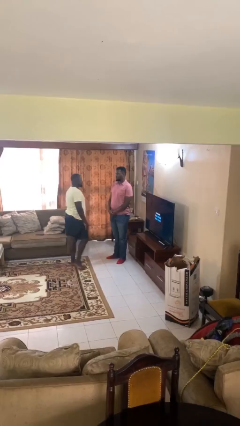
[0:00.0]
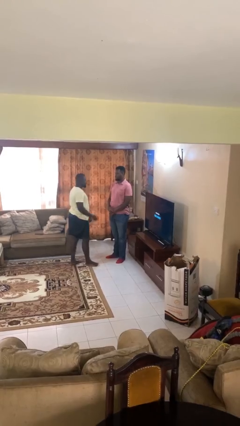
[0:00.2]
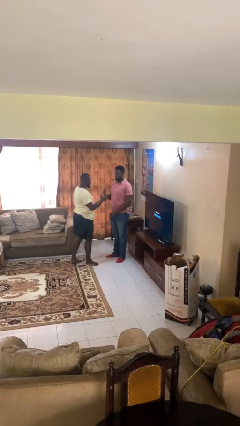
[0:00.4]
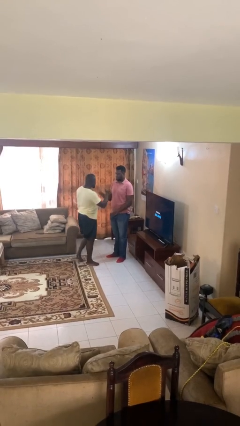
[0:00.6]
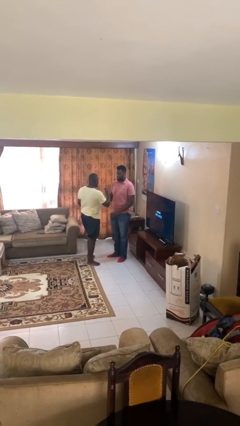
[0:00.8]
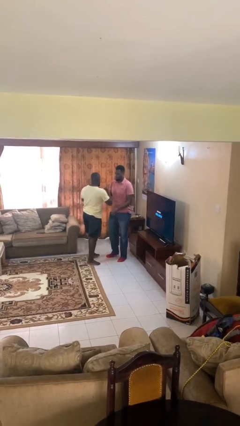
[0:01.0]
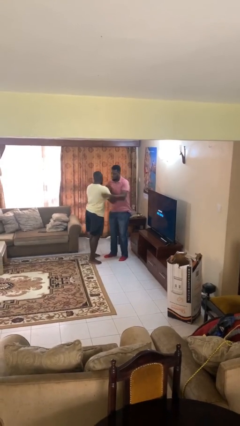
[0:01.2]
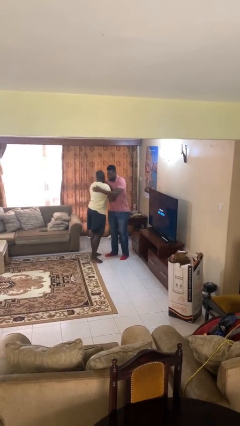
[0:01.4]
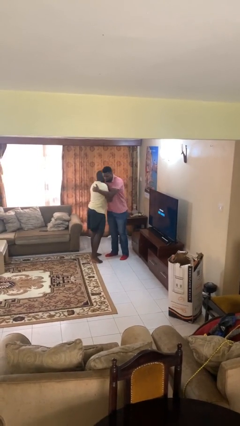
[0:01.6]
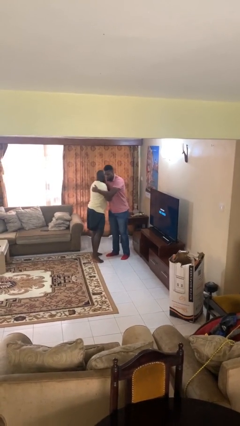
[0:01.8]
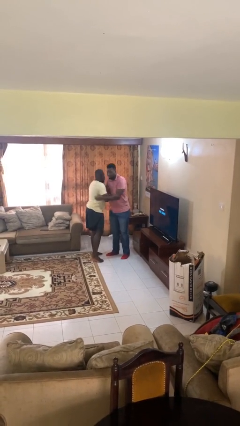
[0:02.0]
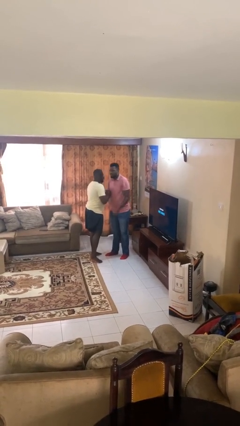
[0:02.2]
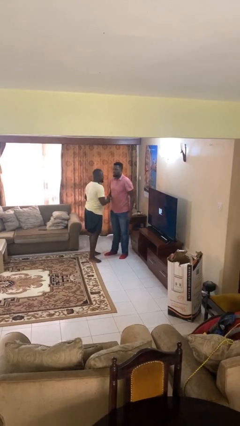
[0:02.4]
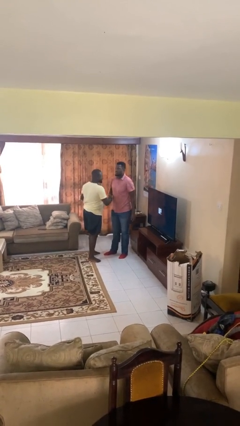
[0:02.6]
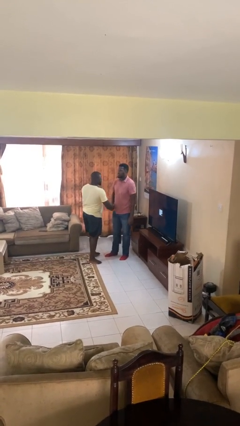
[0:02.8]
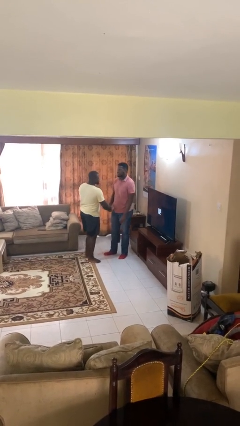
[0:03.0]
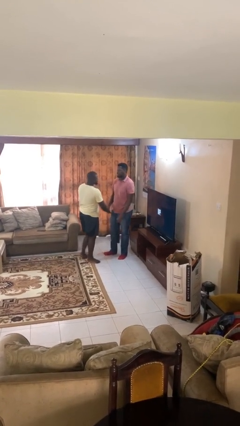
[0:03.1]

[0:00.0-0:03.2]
person embraces person

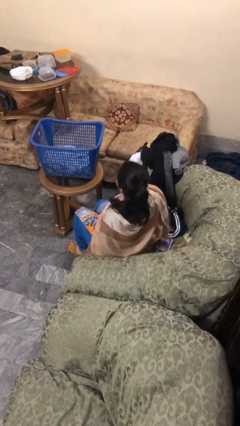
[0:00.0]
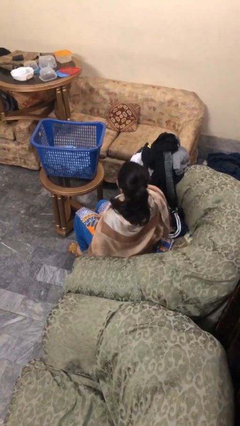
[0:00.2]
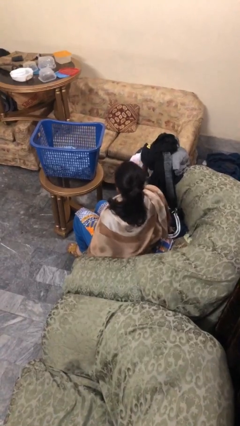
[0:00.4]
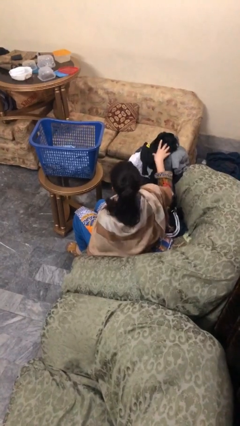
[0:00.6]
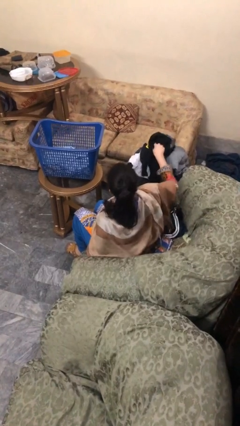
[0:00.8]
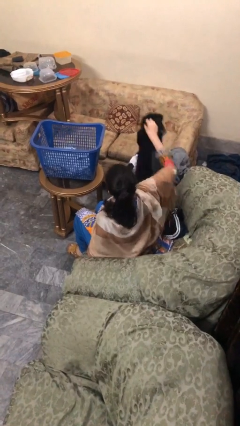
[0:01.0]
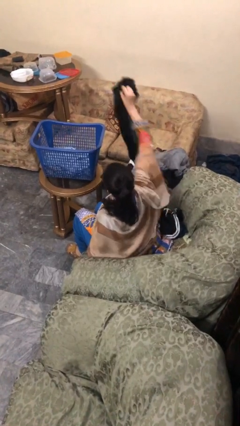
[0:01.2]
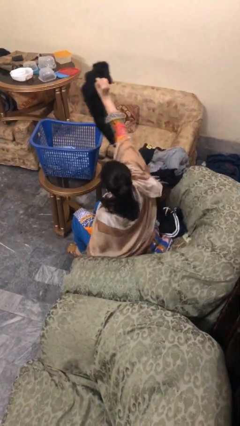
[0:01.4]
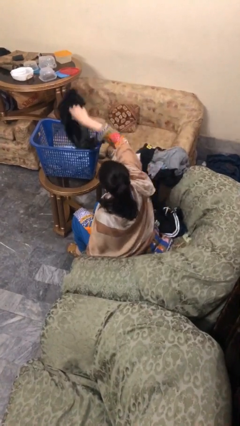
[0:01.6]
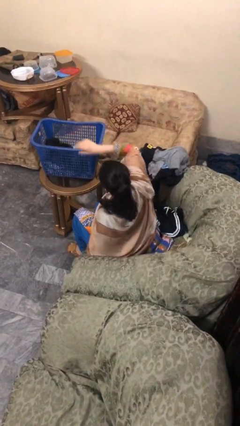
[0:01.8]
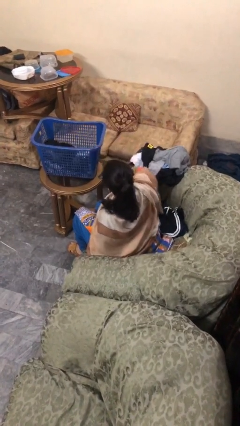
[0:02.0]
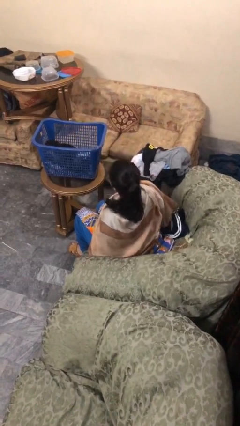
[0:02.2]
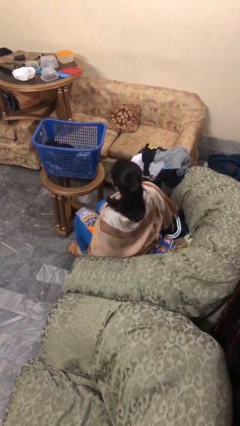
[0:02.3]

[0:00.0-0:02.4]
person puts object into basket

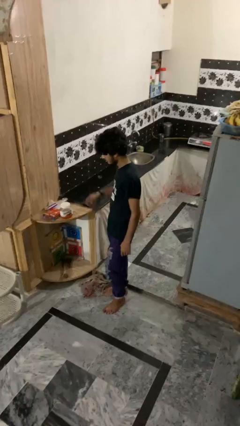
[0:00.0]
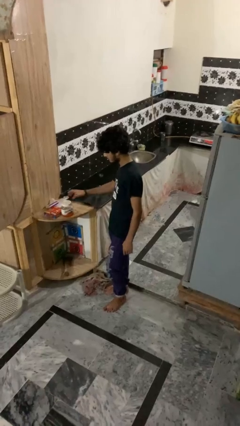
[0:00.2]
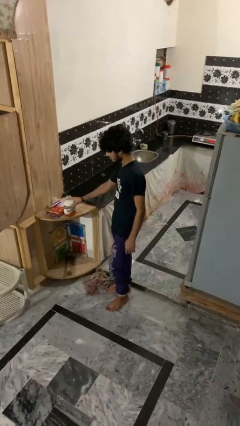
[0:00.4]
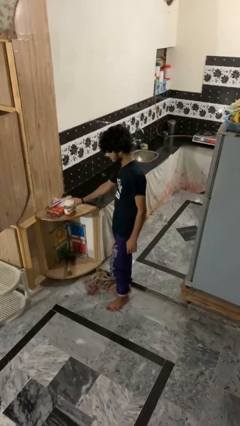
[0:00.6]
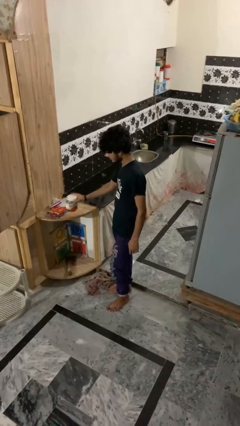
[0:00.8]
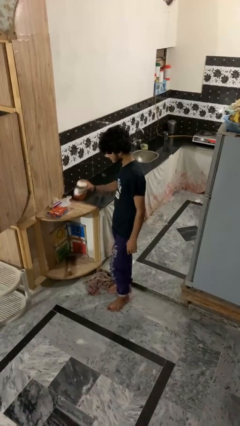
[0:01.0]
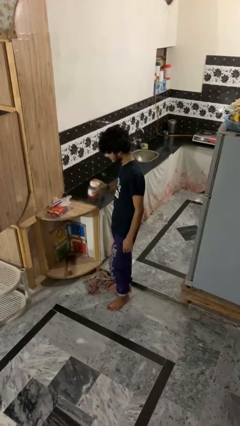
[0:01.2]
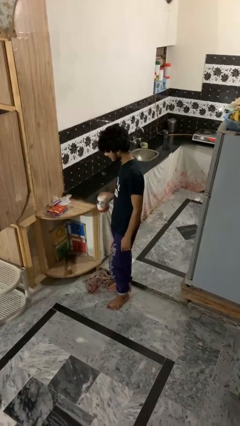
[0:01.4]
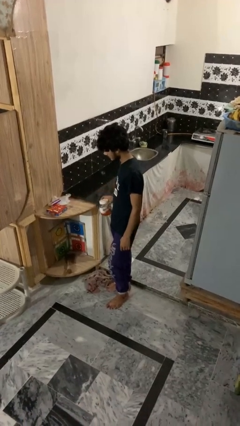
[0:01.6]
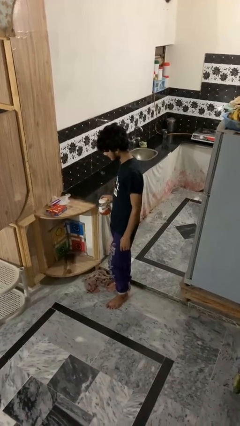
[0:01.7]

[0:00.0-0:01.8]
person picks up object from countertop

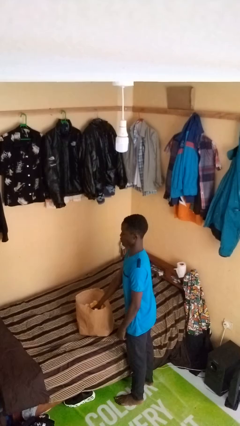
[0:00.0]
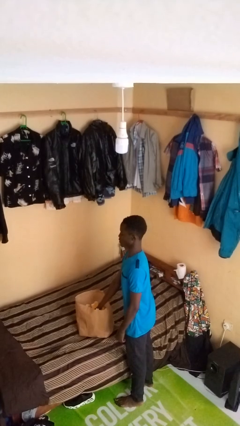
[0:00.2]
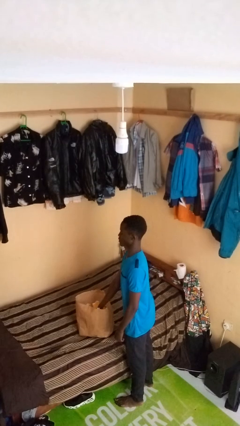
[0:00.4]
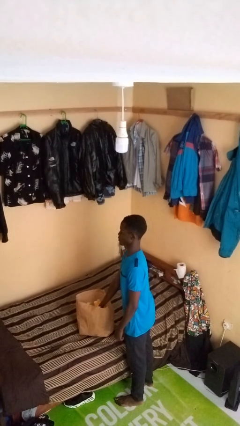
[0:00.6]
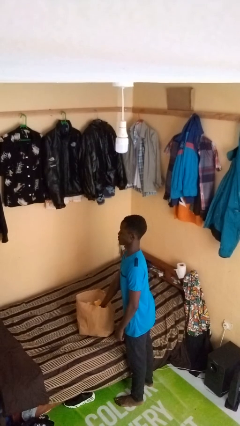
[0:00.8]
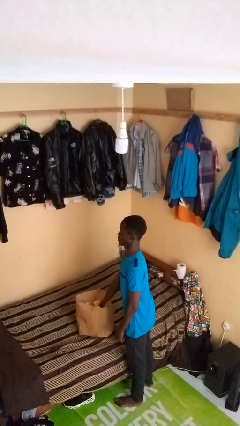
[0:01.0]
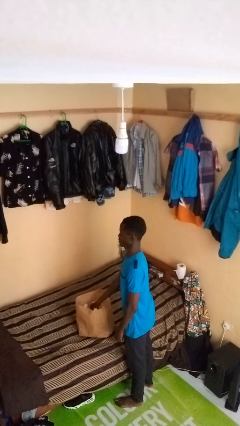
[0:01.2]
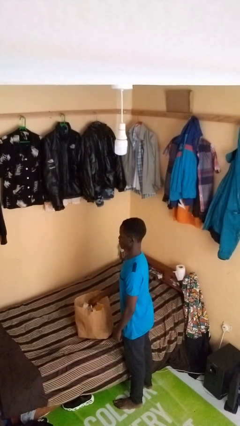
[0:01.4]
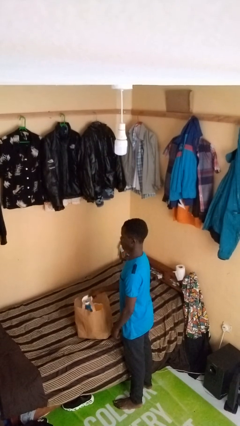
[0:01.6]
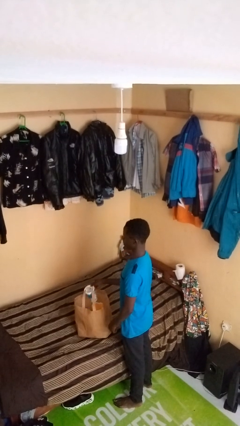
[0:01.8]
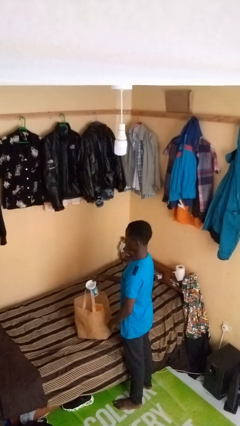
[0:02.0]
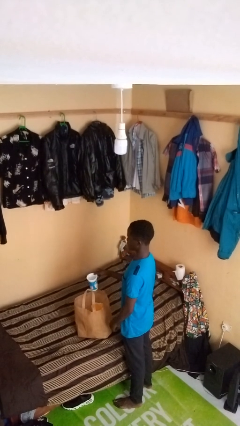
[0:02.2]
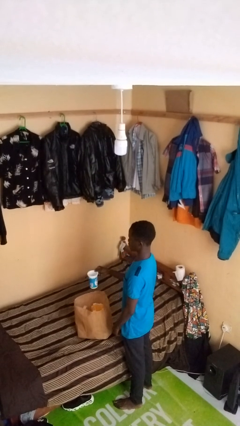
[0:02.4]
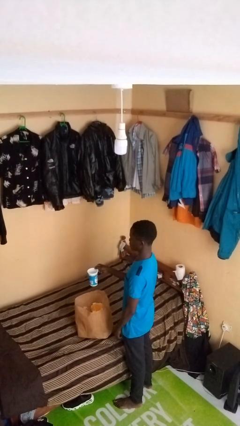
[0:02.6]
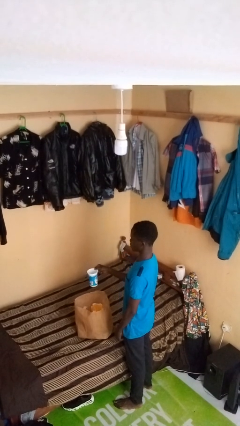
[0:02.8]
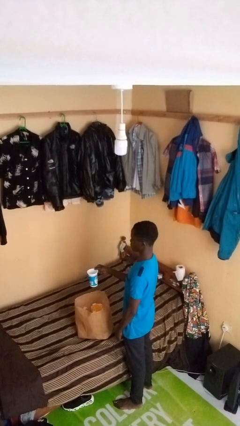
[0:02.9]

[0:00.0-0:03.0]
person takes object from bag

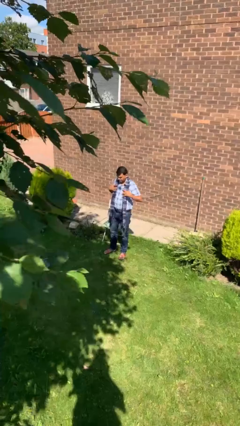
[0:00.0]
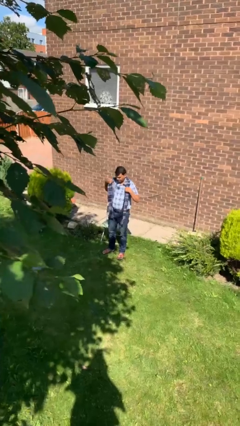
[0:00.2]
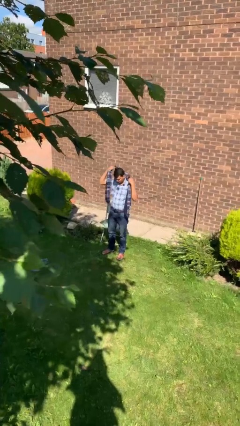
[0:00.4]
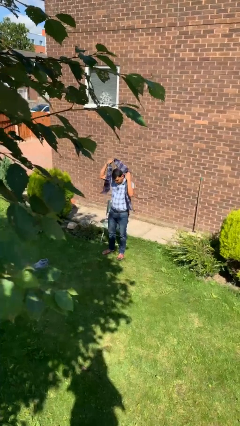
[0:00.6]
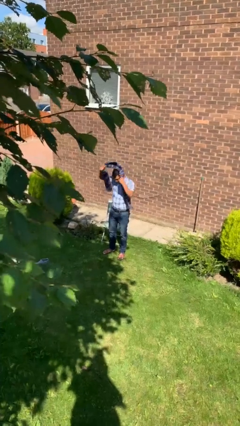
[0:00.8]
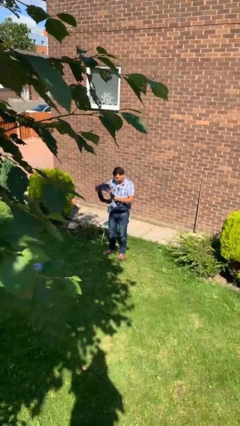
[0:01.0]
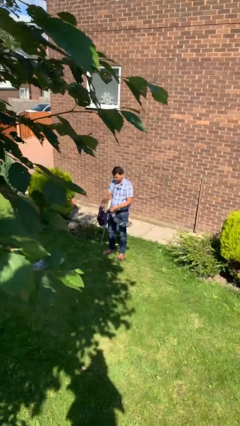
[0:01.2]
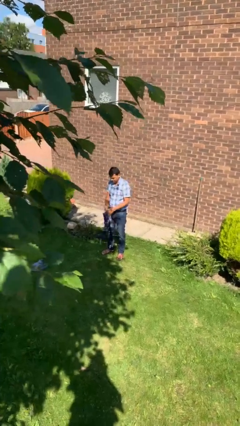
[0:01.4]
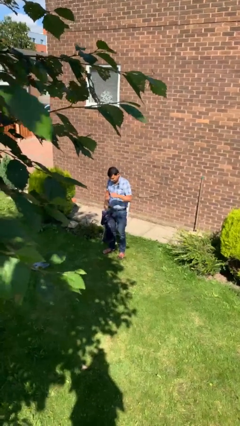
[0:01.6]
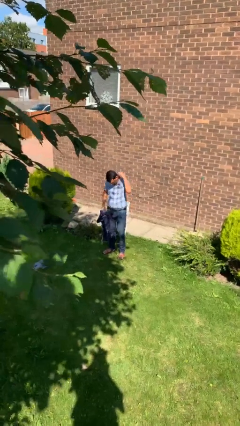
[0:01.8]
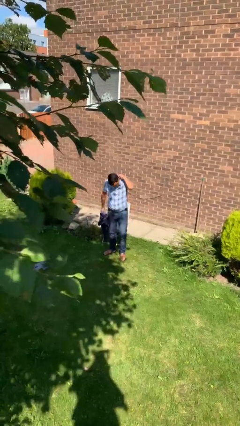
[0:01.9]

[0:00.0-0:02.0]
person takes off scarf

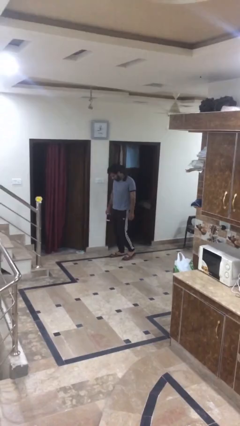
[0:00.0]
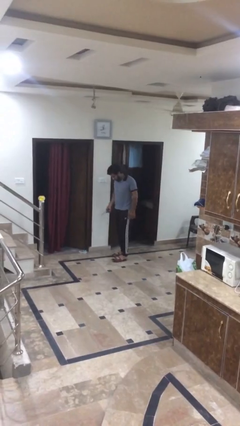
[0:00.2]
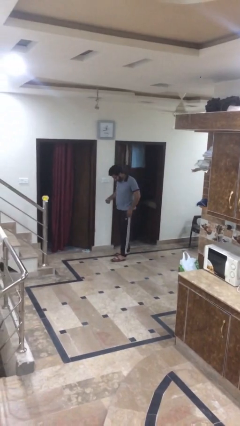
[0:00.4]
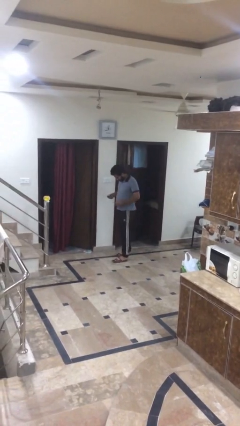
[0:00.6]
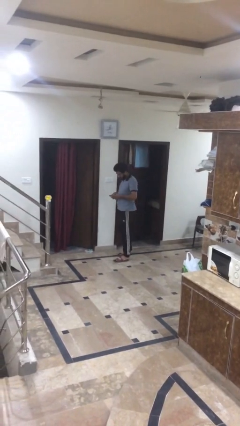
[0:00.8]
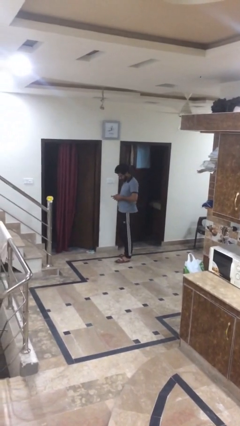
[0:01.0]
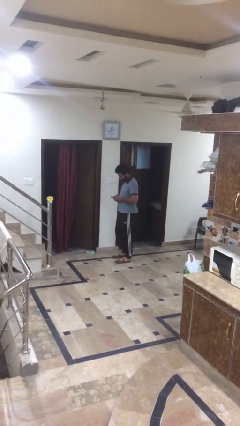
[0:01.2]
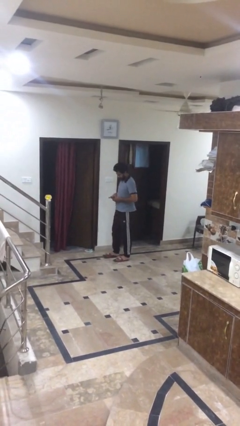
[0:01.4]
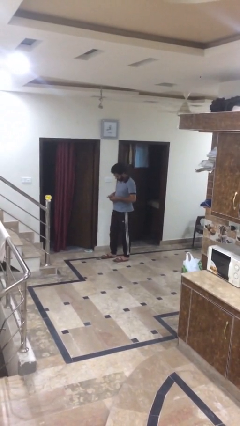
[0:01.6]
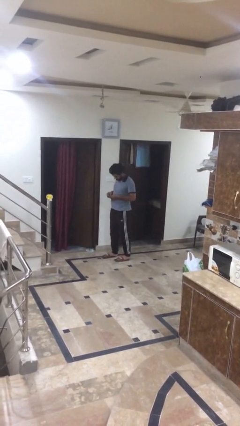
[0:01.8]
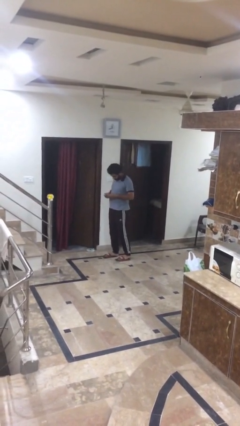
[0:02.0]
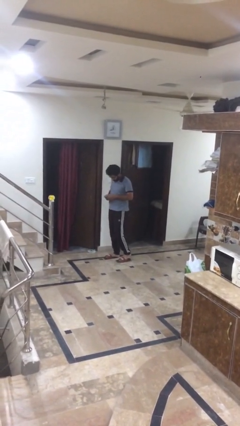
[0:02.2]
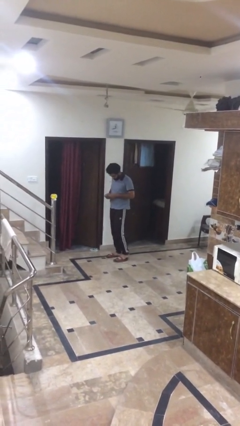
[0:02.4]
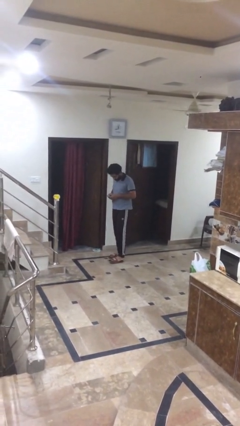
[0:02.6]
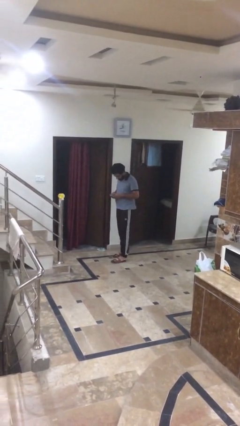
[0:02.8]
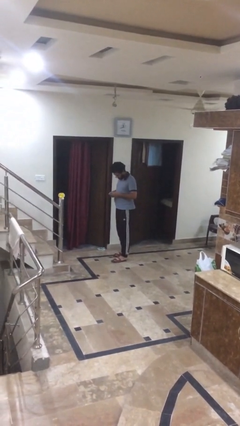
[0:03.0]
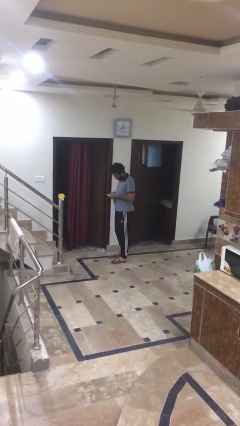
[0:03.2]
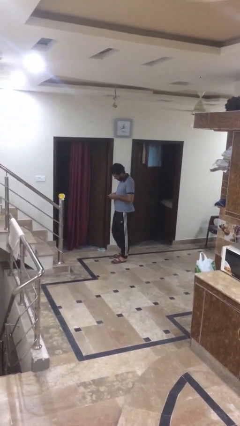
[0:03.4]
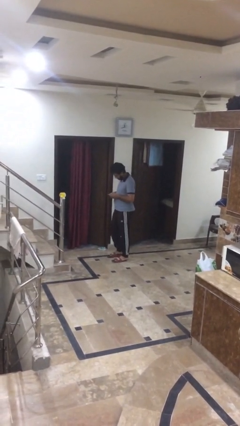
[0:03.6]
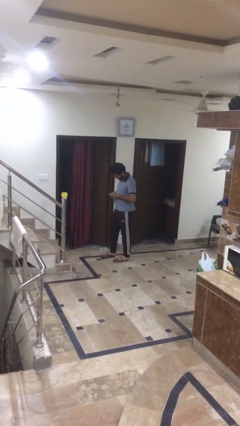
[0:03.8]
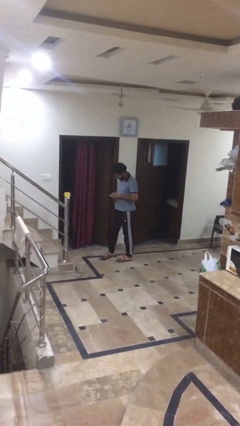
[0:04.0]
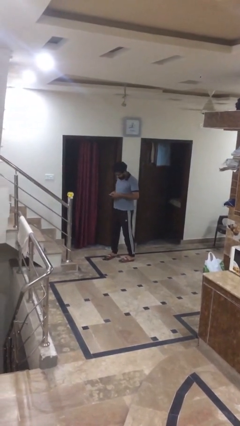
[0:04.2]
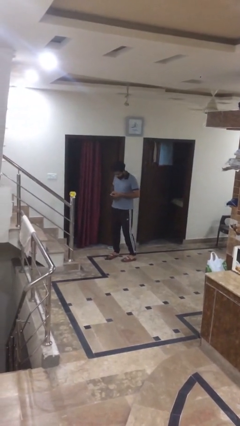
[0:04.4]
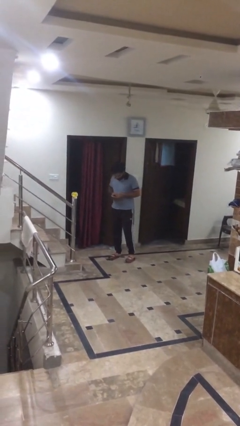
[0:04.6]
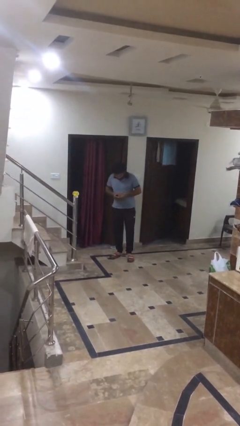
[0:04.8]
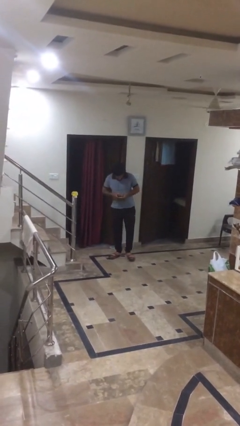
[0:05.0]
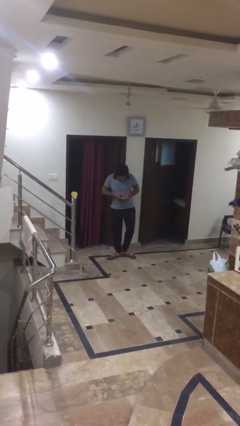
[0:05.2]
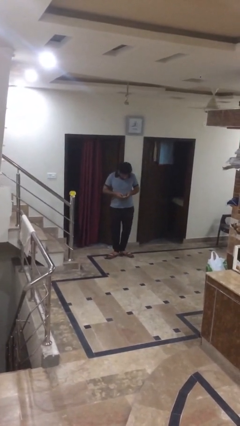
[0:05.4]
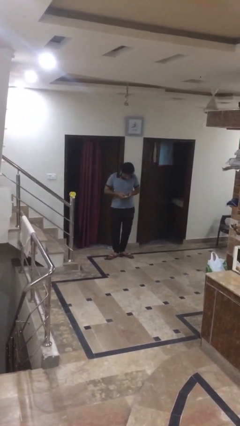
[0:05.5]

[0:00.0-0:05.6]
person texts on phone
